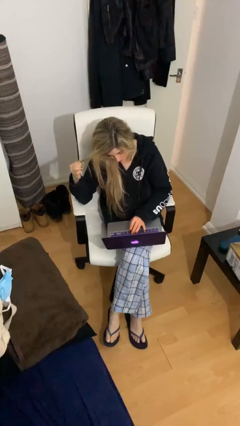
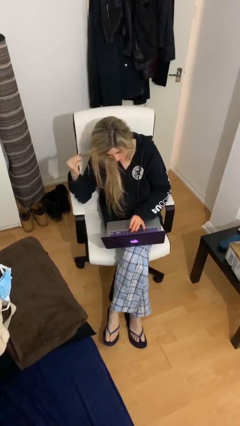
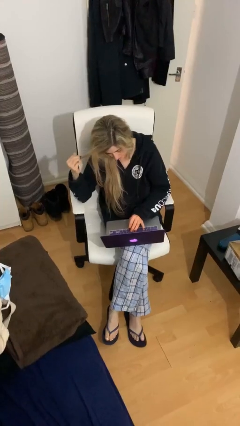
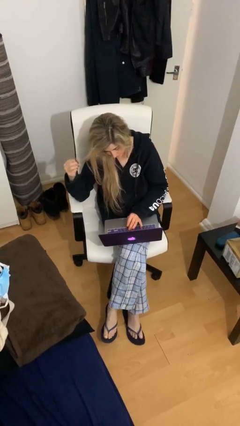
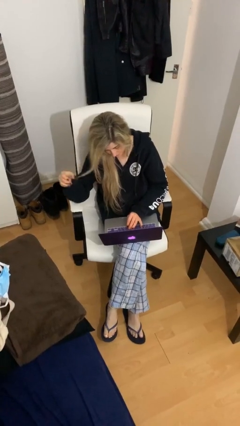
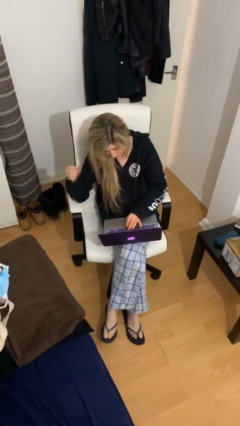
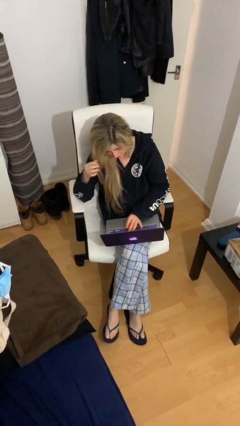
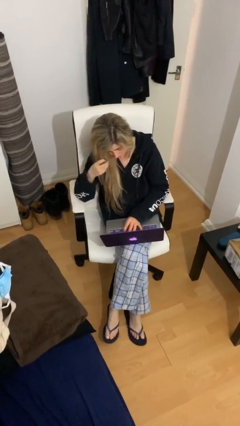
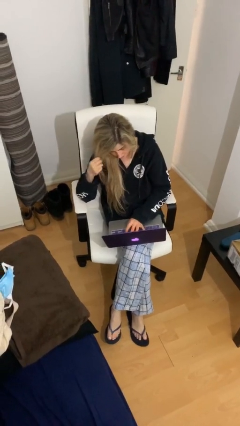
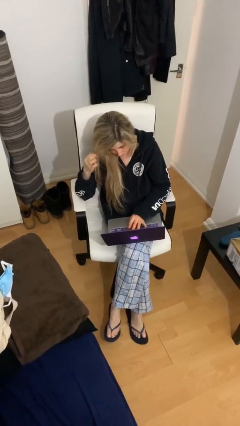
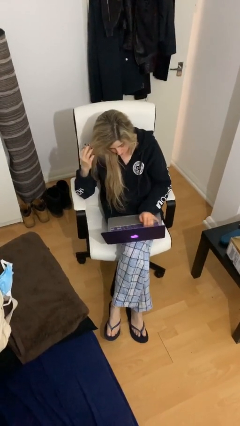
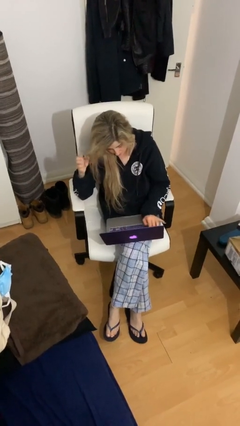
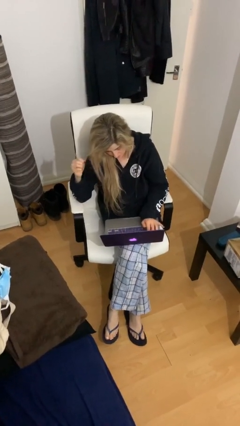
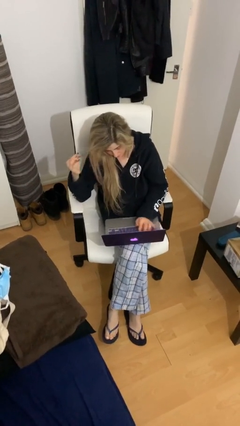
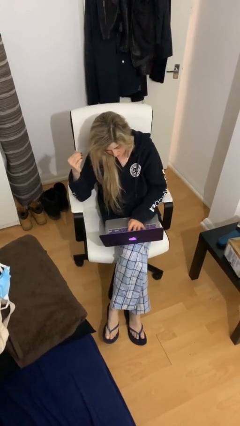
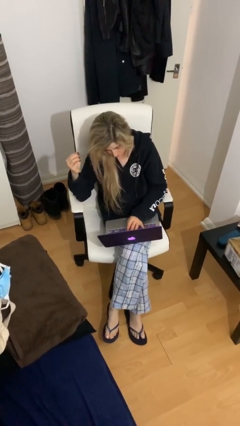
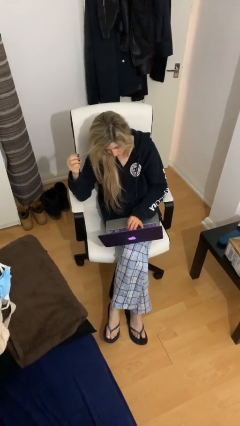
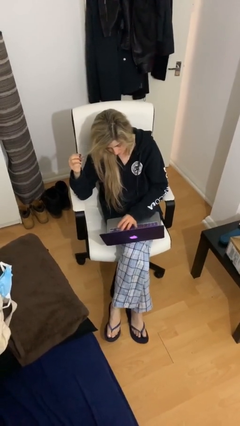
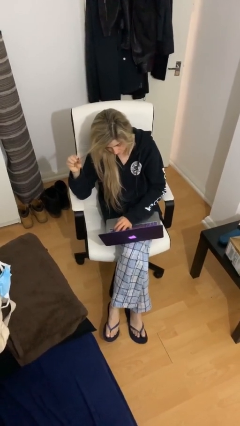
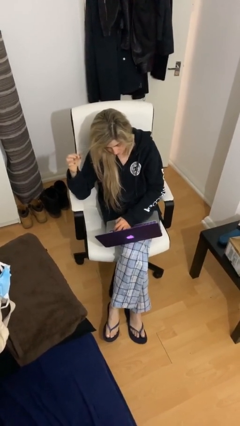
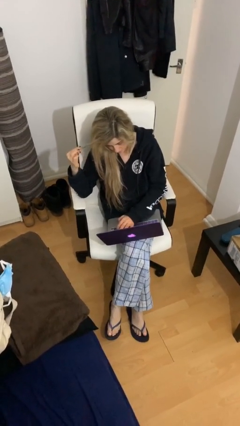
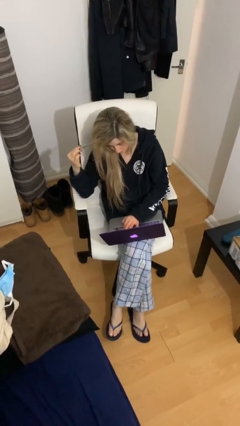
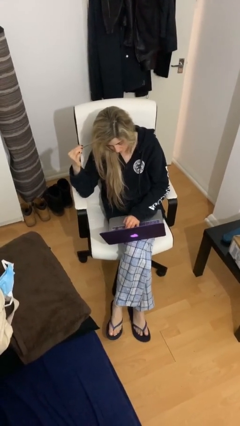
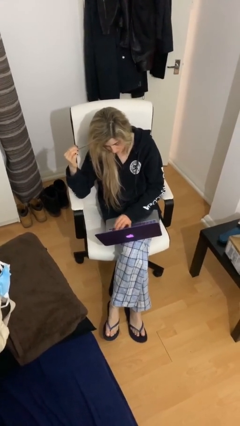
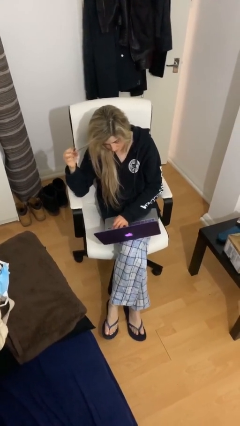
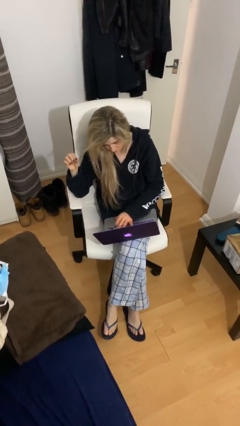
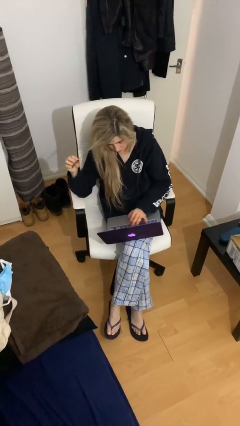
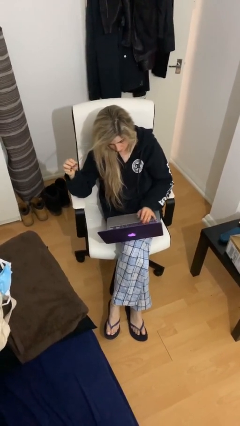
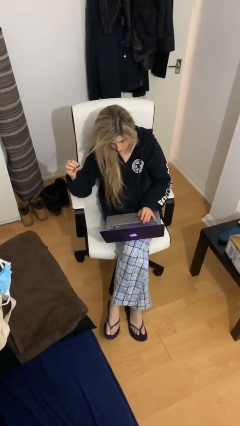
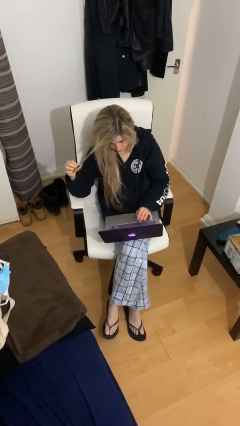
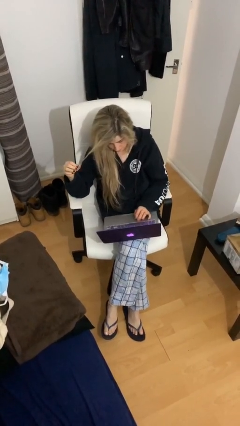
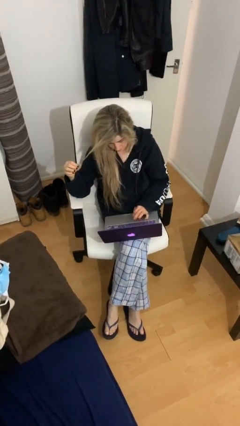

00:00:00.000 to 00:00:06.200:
person interacts with laptop

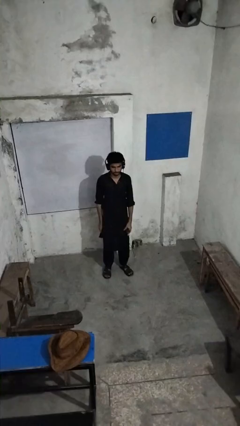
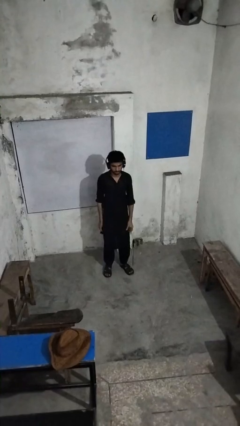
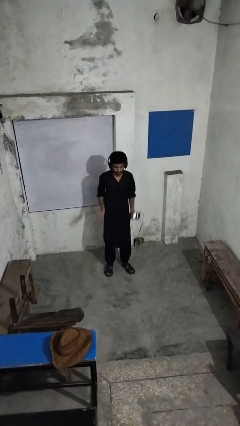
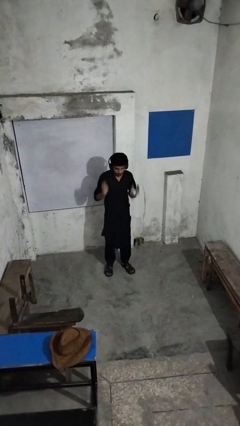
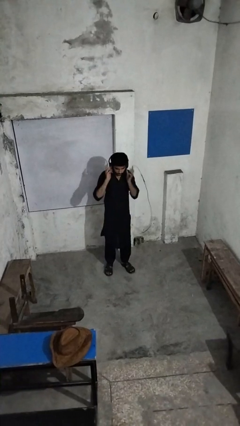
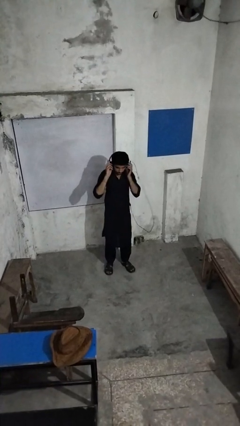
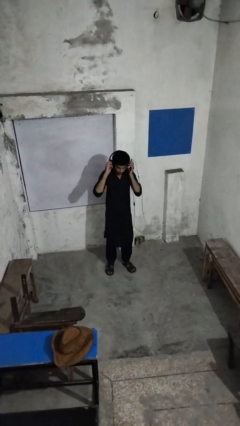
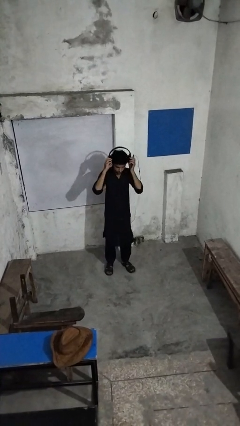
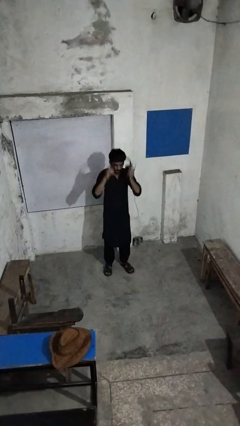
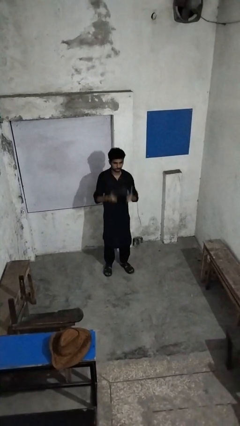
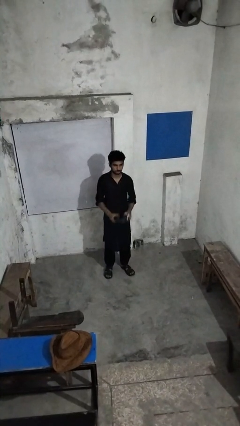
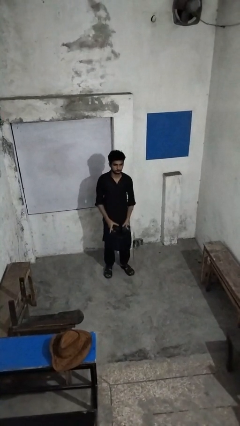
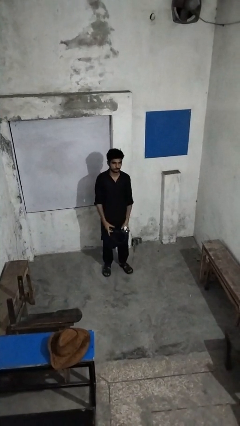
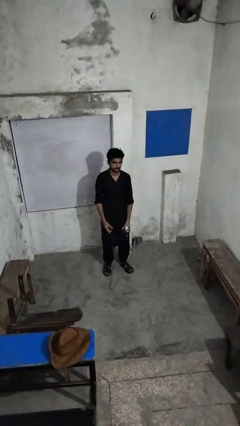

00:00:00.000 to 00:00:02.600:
person takes off headphones

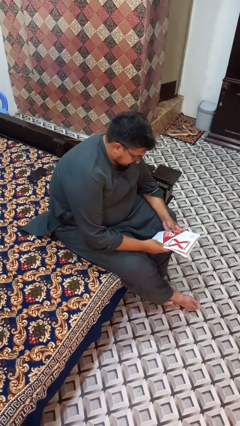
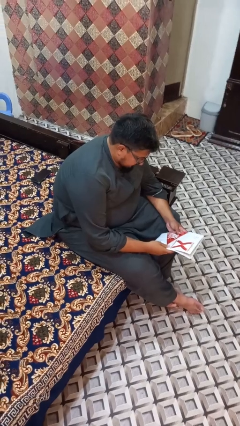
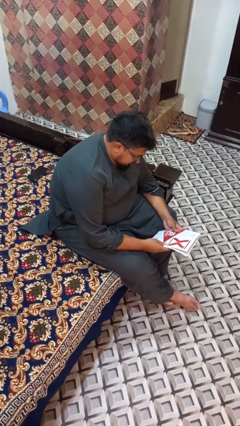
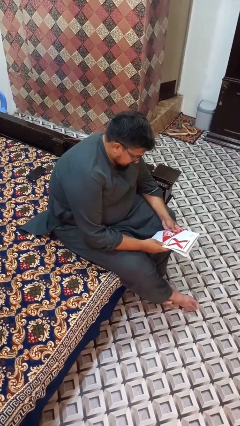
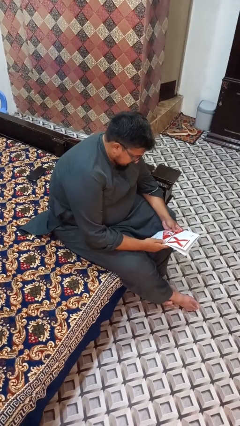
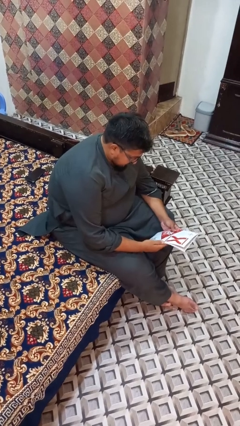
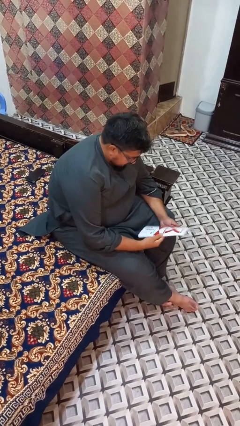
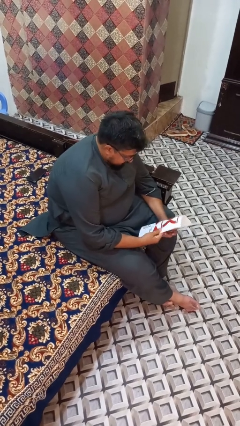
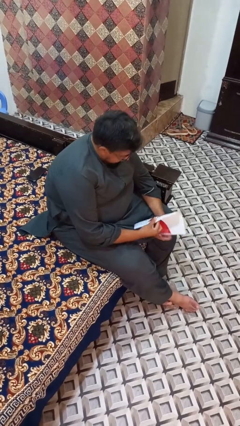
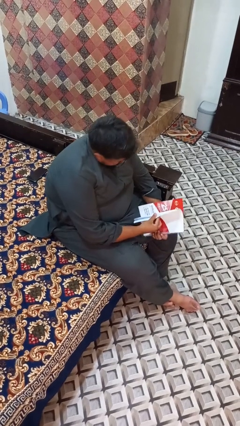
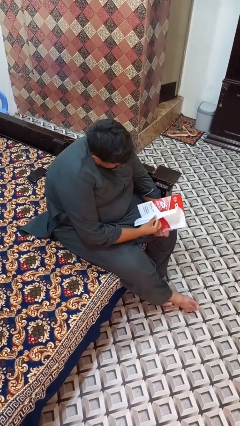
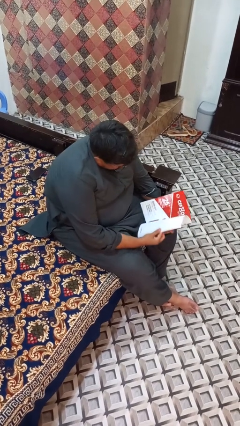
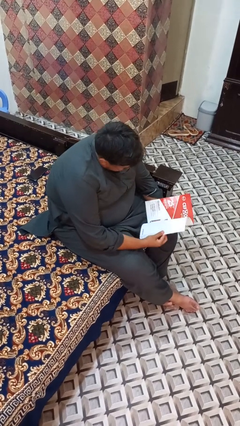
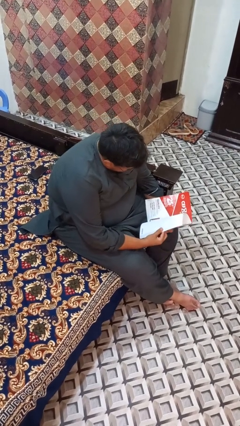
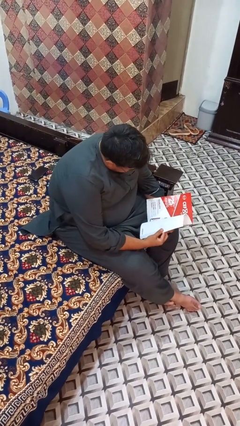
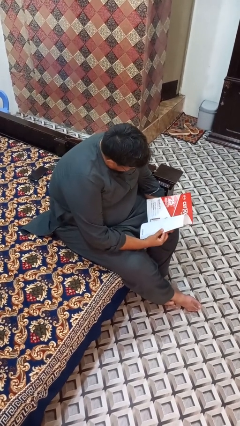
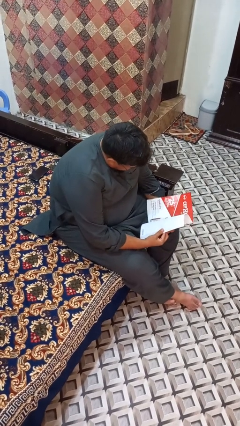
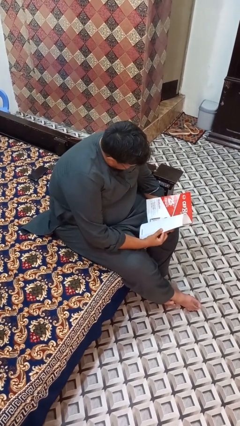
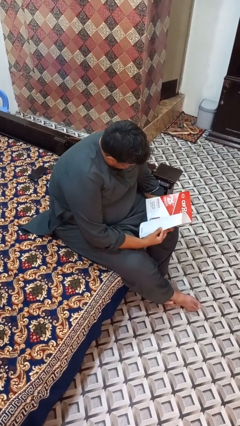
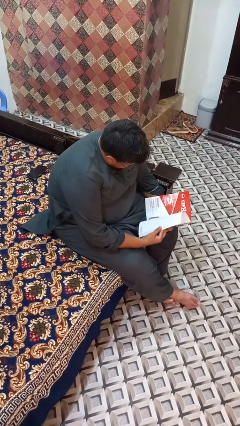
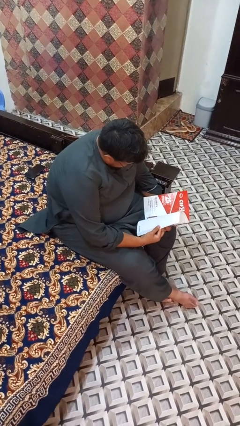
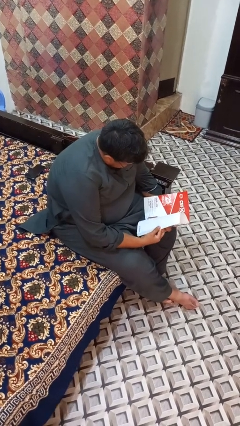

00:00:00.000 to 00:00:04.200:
person reads magazine

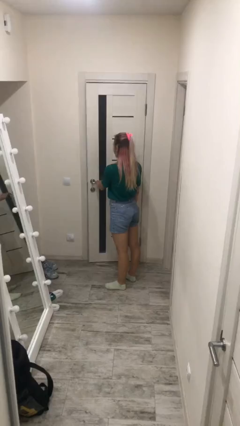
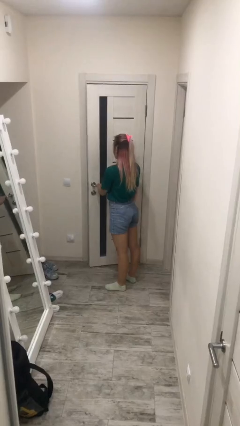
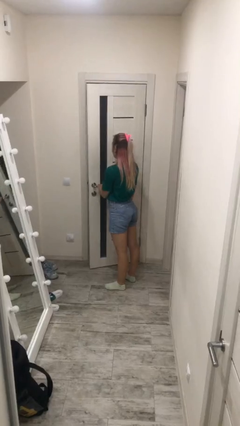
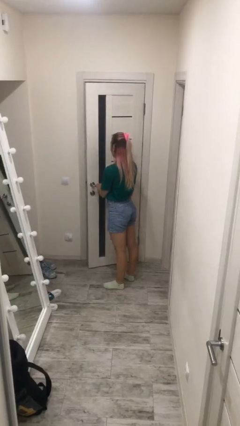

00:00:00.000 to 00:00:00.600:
person opens facility door

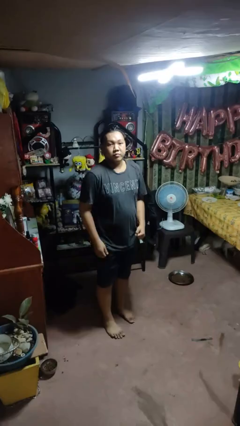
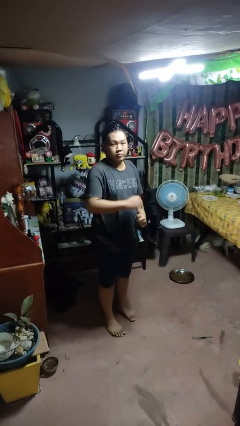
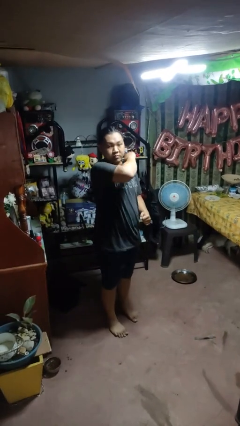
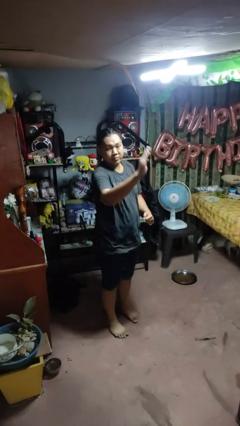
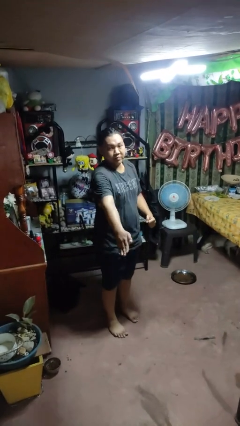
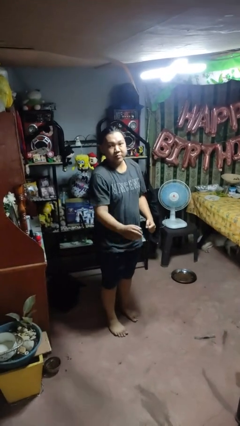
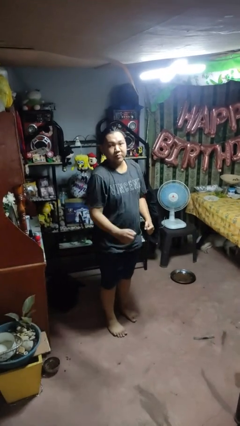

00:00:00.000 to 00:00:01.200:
person karate chop

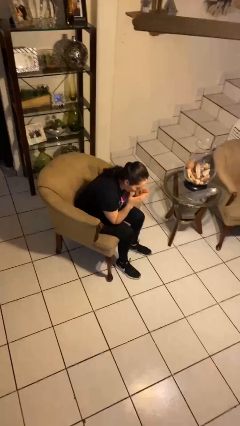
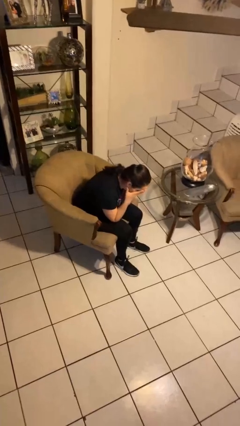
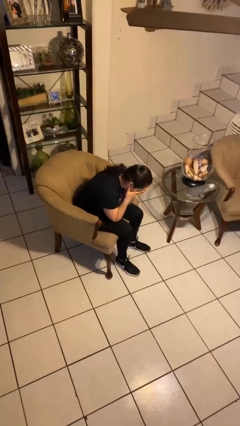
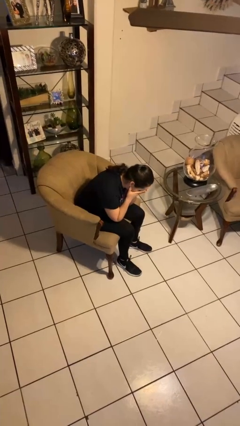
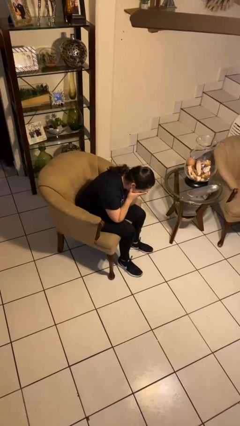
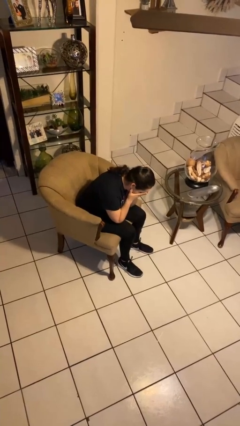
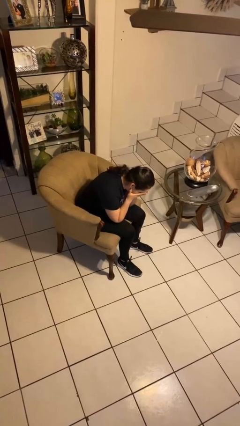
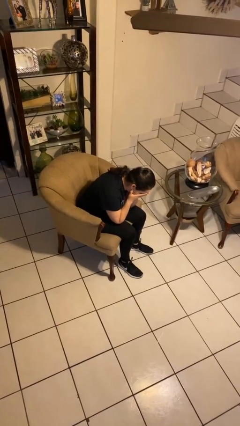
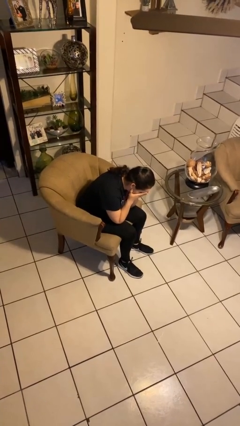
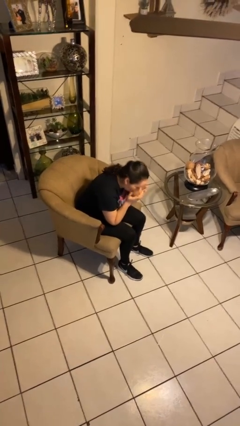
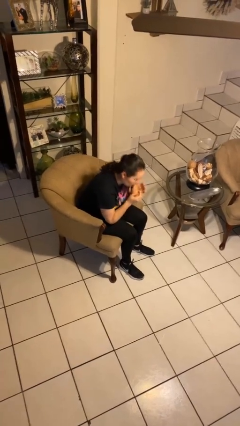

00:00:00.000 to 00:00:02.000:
person prays
